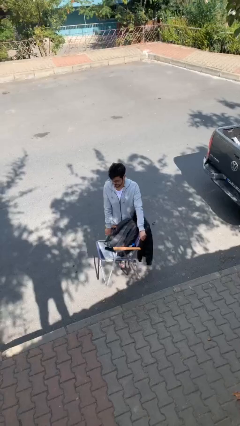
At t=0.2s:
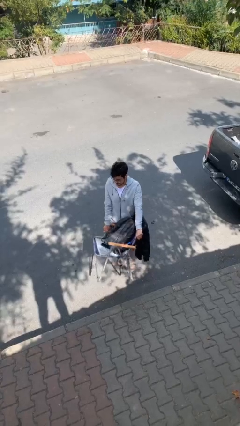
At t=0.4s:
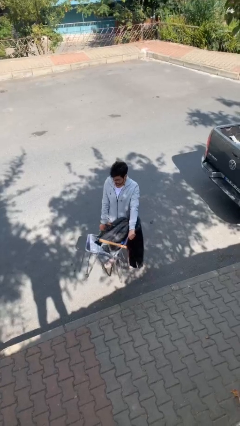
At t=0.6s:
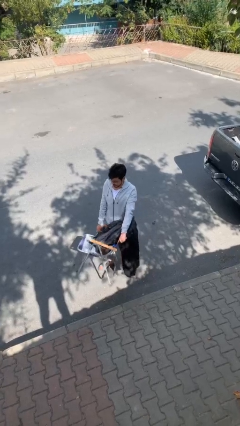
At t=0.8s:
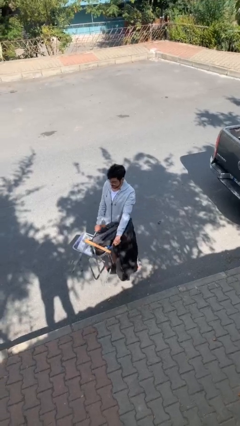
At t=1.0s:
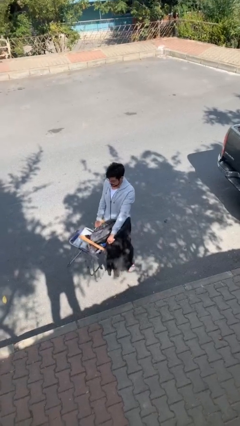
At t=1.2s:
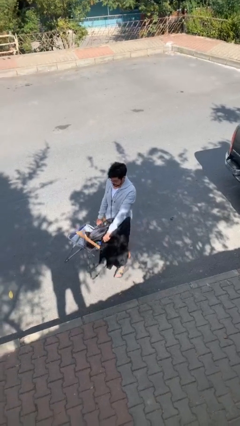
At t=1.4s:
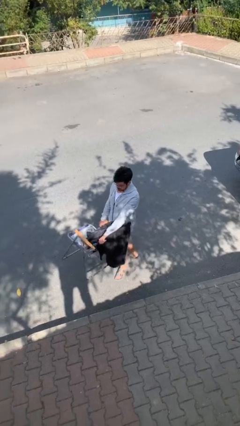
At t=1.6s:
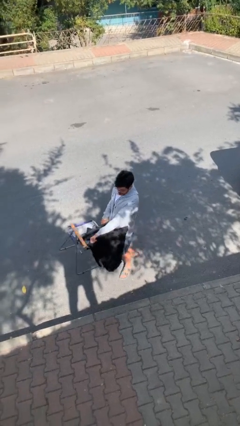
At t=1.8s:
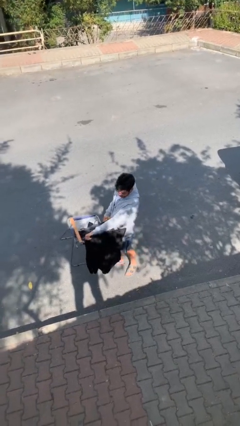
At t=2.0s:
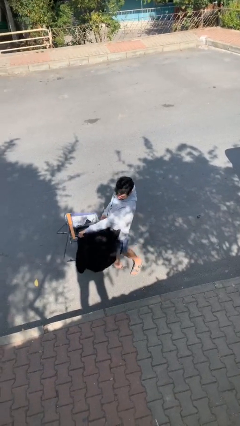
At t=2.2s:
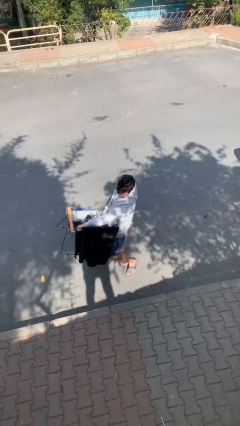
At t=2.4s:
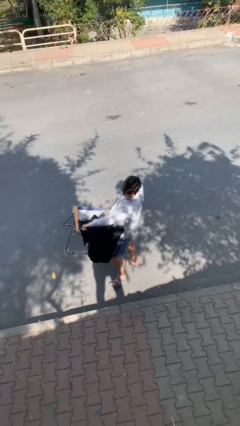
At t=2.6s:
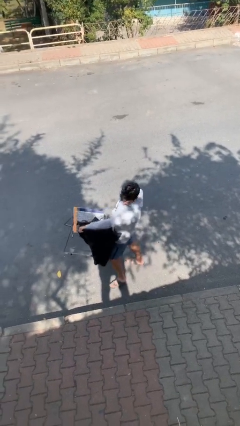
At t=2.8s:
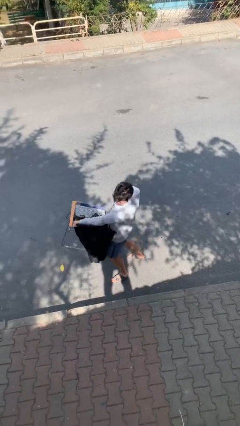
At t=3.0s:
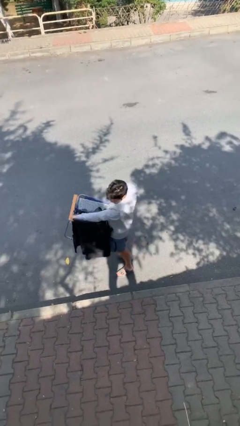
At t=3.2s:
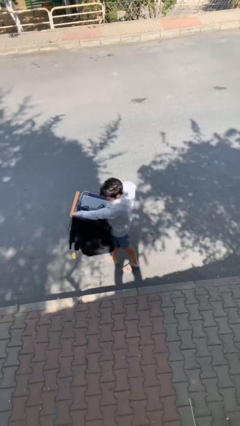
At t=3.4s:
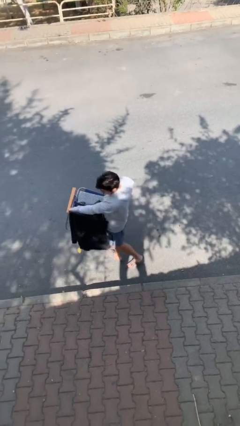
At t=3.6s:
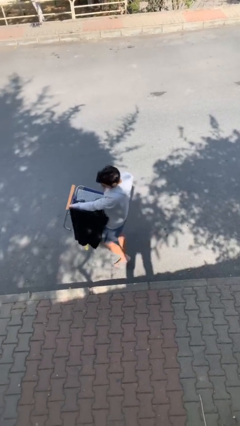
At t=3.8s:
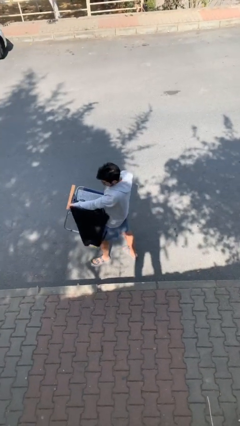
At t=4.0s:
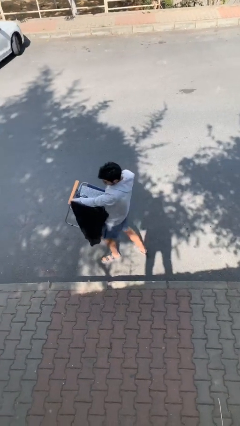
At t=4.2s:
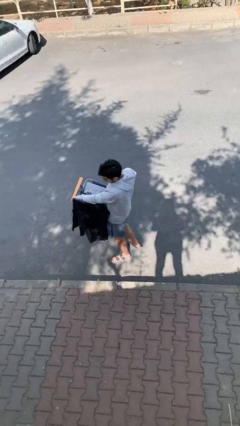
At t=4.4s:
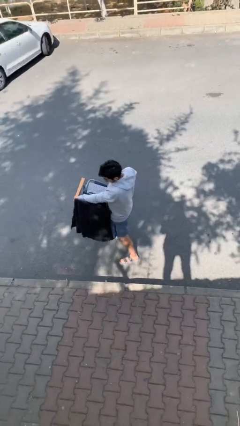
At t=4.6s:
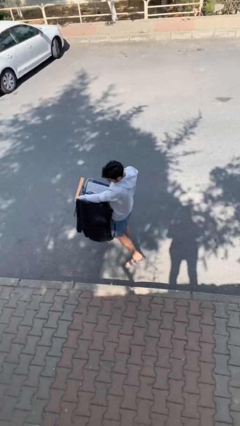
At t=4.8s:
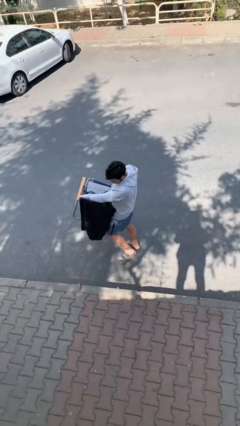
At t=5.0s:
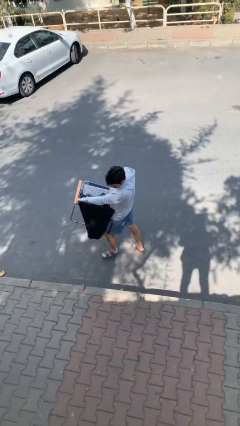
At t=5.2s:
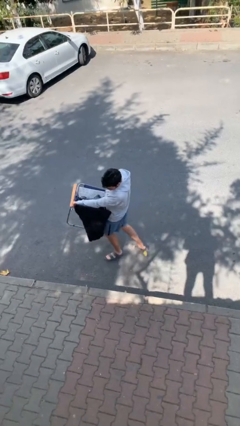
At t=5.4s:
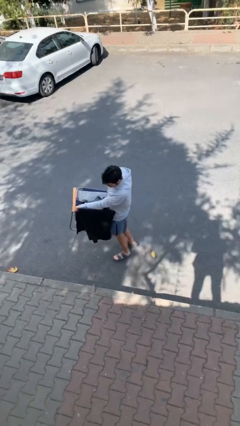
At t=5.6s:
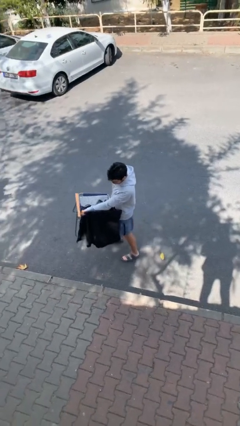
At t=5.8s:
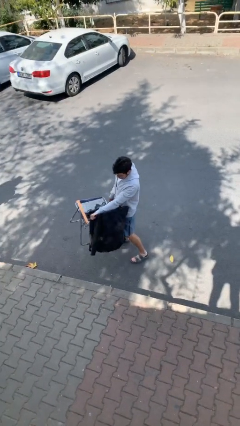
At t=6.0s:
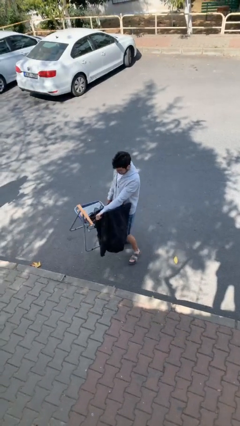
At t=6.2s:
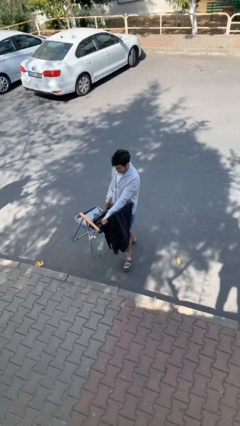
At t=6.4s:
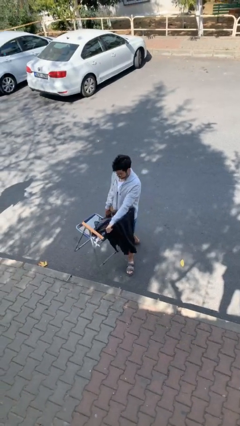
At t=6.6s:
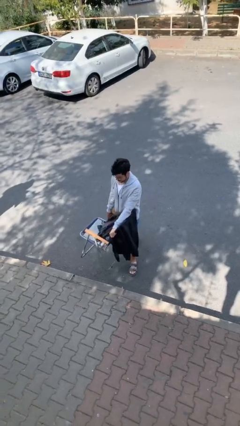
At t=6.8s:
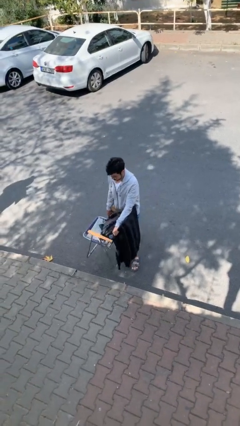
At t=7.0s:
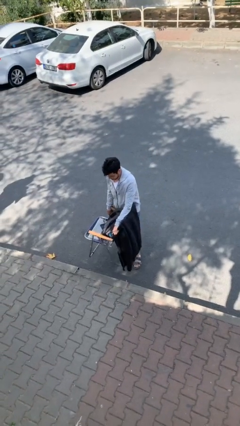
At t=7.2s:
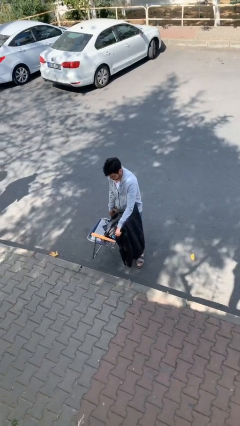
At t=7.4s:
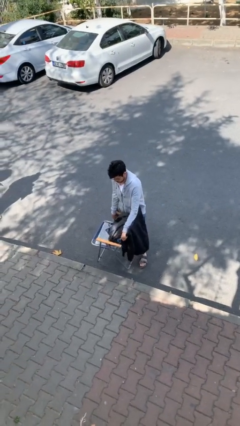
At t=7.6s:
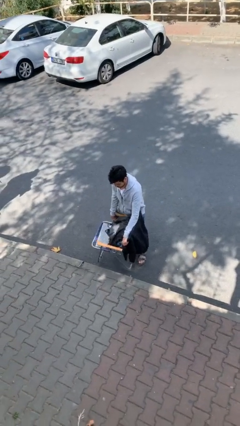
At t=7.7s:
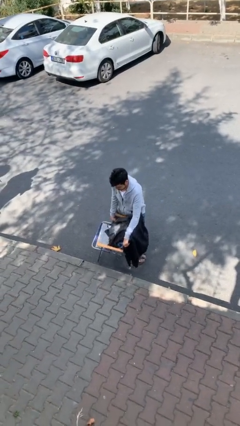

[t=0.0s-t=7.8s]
person carries heavy object

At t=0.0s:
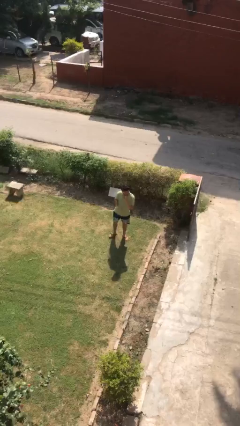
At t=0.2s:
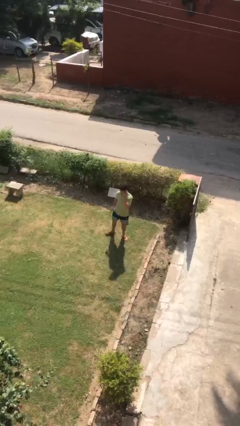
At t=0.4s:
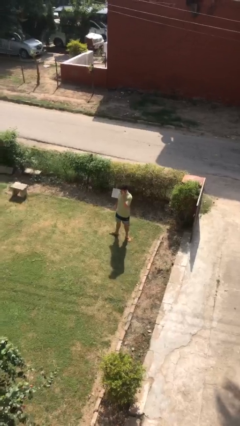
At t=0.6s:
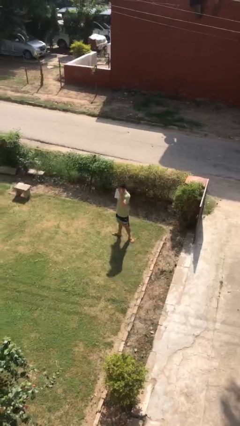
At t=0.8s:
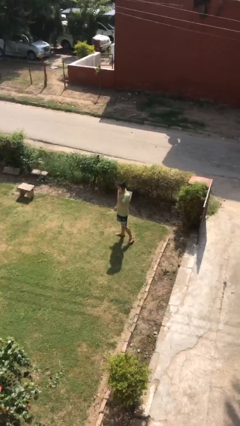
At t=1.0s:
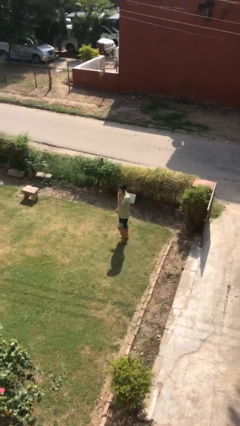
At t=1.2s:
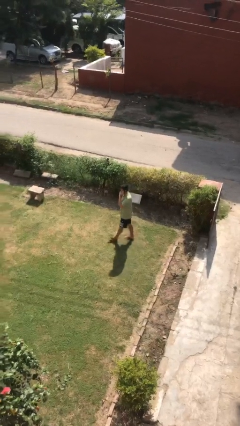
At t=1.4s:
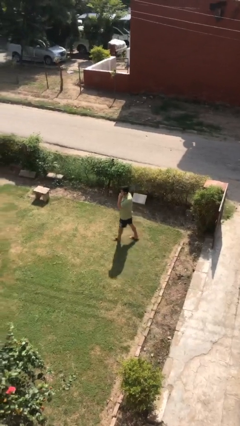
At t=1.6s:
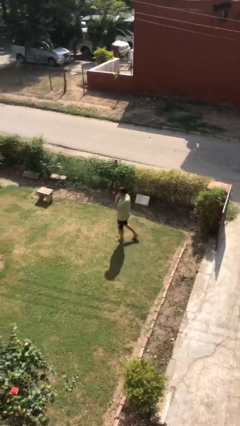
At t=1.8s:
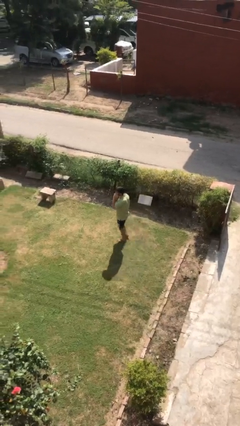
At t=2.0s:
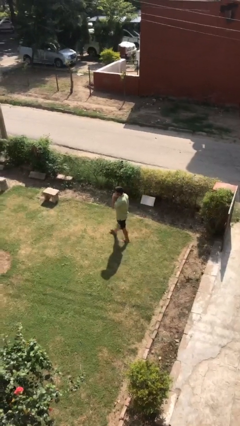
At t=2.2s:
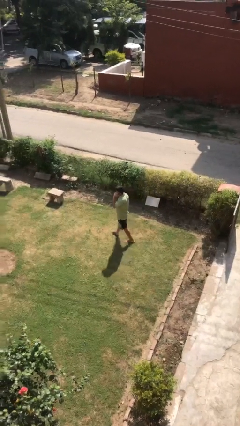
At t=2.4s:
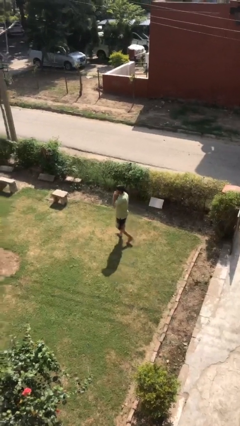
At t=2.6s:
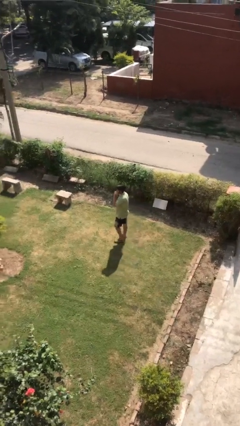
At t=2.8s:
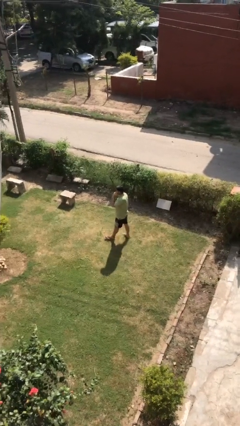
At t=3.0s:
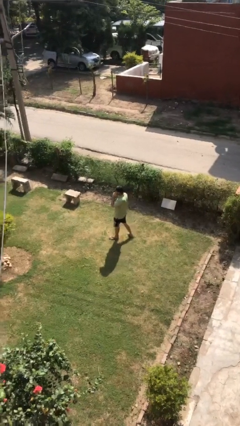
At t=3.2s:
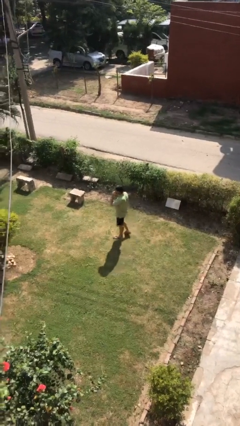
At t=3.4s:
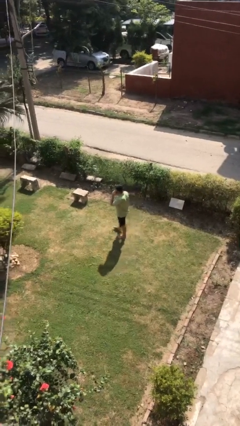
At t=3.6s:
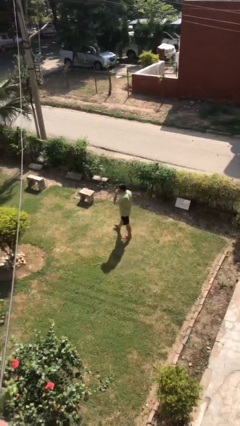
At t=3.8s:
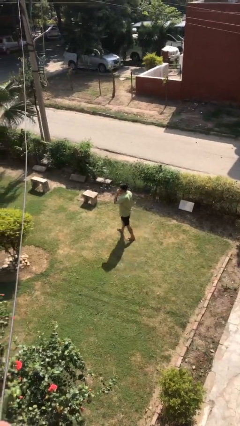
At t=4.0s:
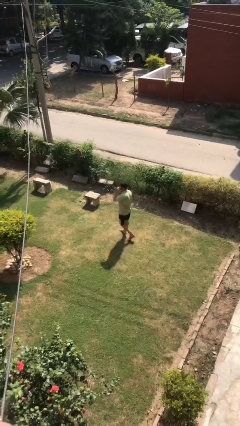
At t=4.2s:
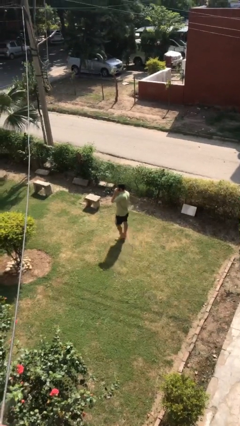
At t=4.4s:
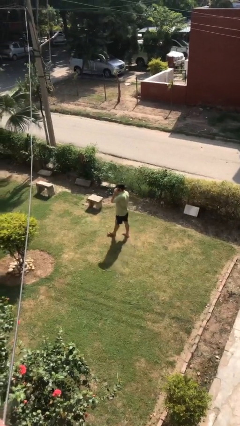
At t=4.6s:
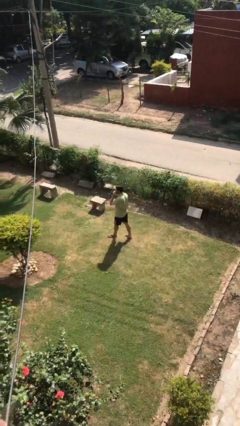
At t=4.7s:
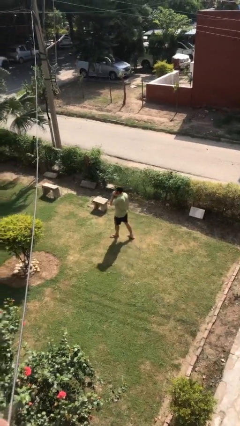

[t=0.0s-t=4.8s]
person talks on phone

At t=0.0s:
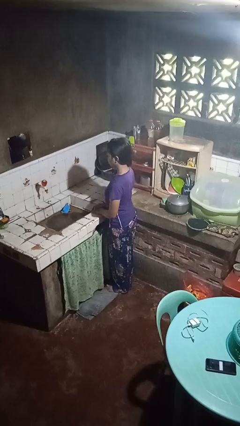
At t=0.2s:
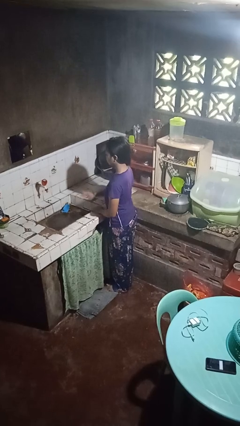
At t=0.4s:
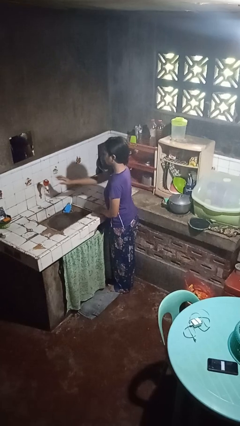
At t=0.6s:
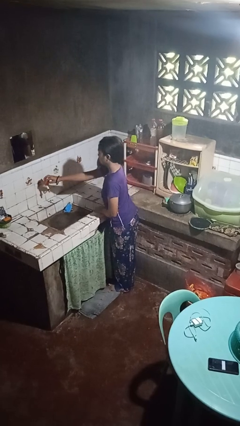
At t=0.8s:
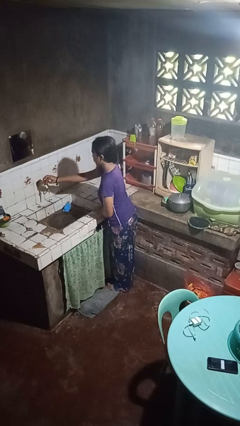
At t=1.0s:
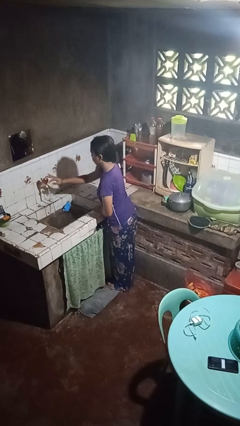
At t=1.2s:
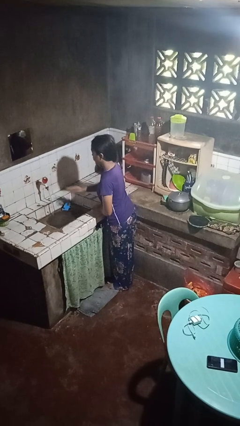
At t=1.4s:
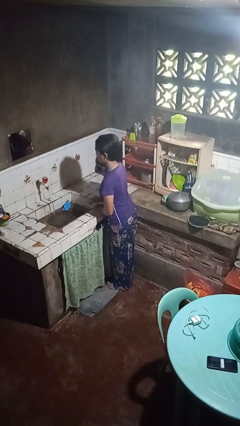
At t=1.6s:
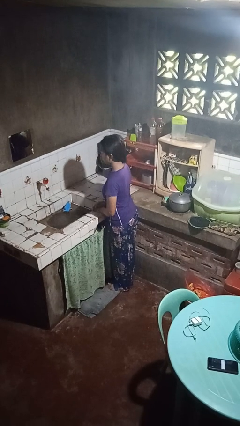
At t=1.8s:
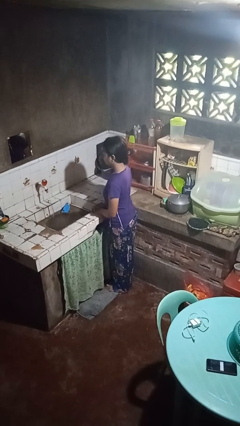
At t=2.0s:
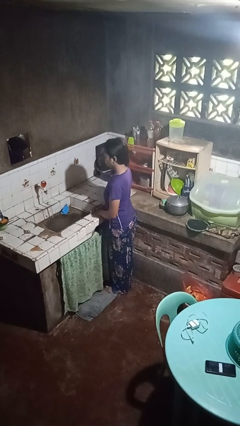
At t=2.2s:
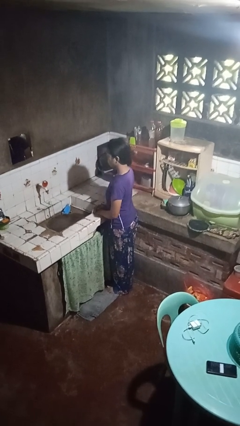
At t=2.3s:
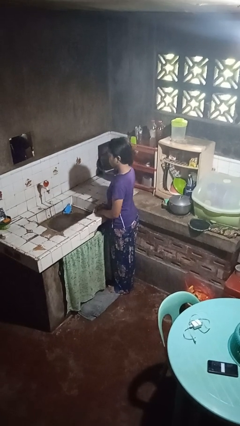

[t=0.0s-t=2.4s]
person turns on faucet

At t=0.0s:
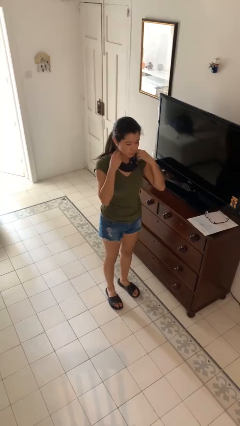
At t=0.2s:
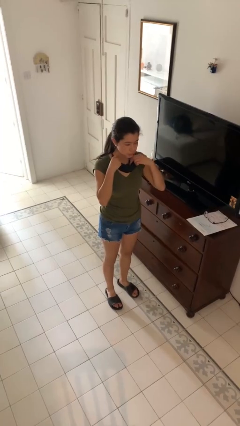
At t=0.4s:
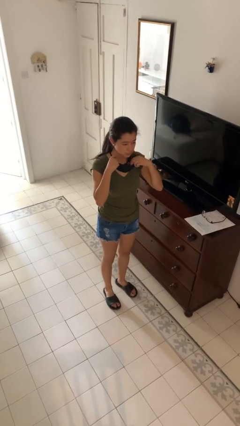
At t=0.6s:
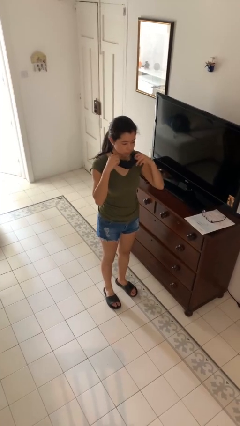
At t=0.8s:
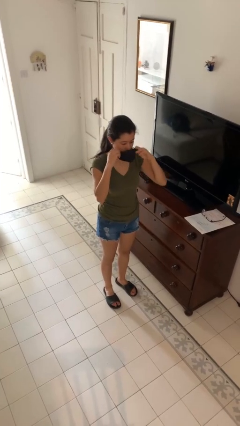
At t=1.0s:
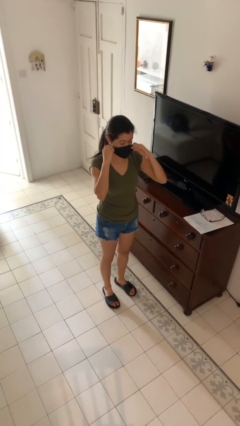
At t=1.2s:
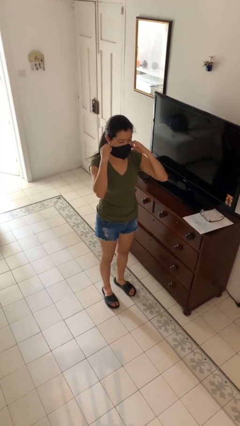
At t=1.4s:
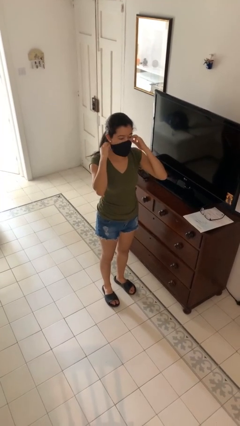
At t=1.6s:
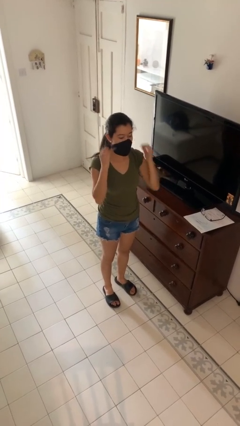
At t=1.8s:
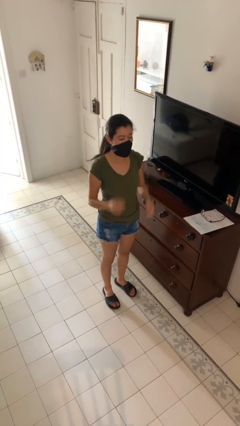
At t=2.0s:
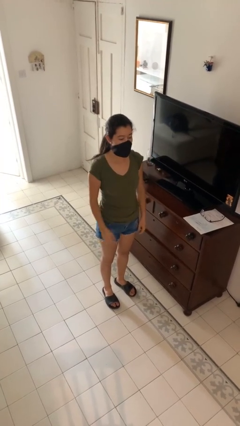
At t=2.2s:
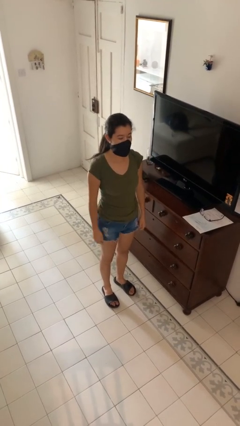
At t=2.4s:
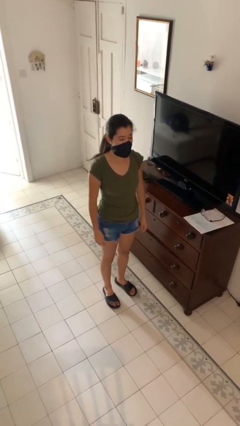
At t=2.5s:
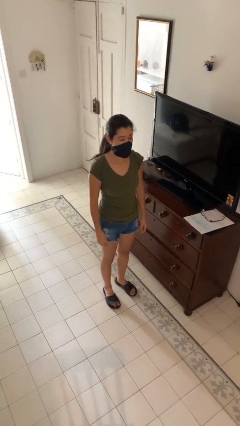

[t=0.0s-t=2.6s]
person puts on facemask

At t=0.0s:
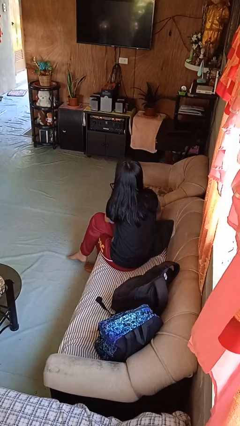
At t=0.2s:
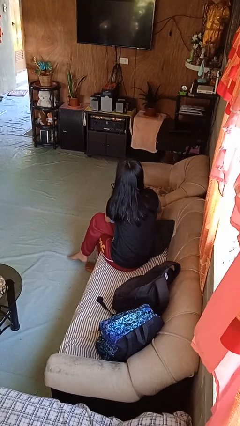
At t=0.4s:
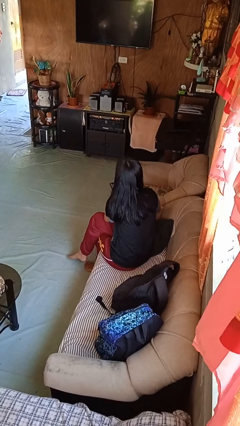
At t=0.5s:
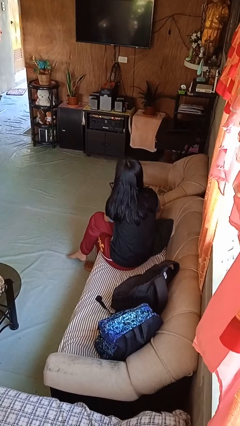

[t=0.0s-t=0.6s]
person uses television remote
